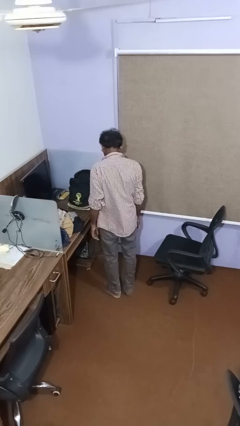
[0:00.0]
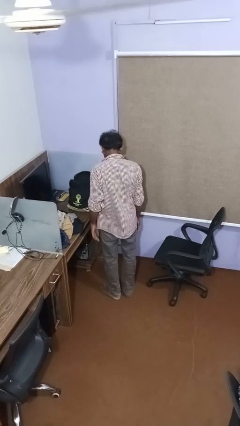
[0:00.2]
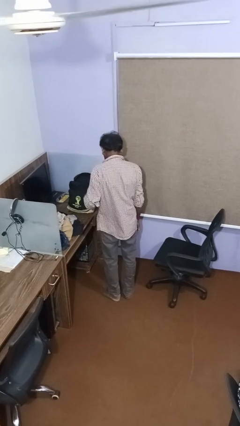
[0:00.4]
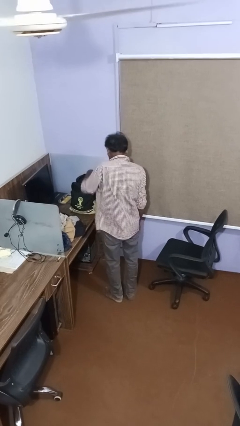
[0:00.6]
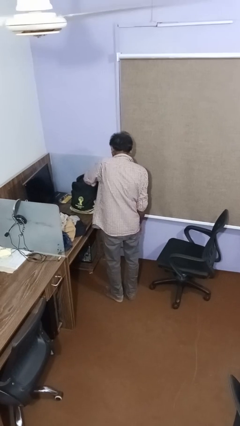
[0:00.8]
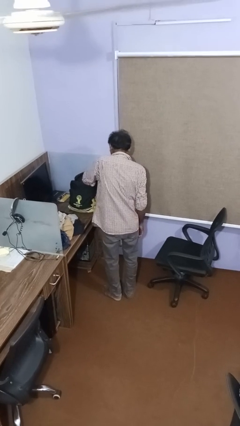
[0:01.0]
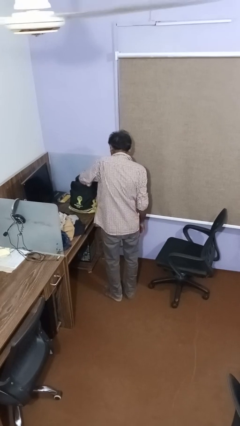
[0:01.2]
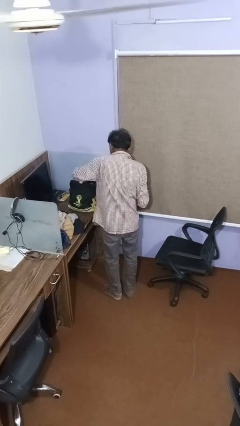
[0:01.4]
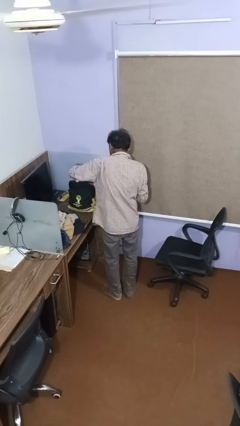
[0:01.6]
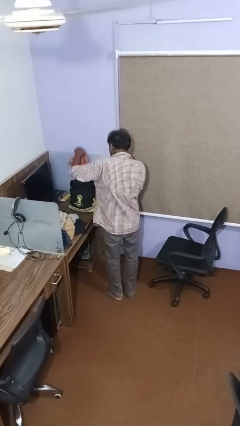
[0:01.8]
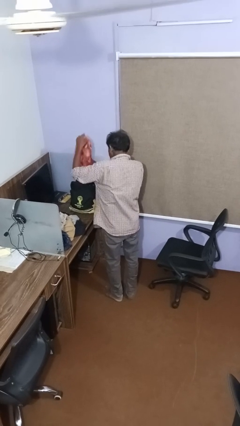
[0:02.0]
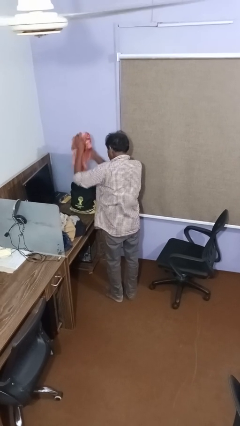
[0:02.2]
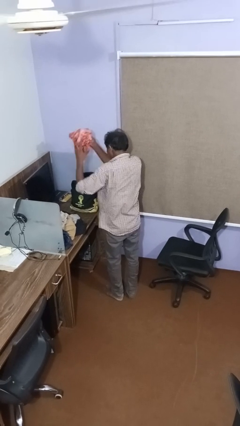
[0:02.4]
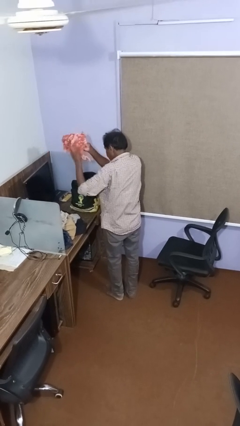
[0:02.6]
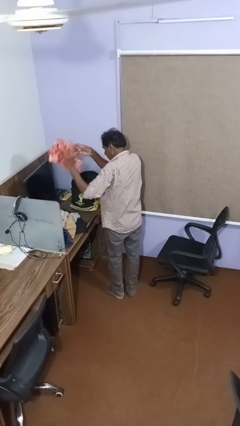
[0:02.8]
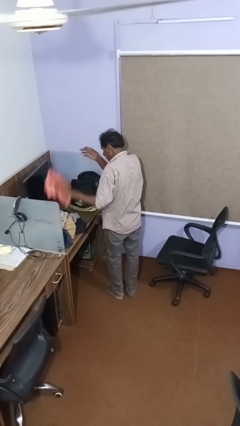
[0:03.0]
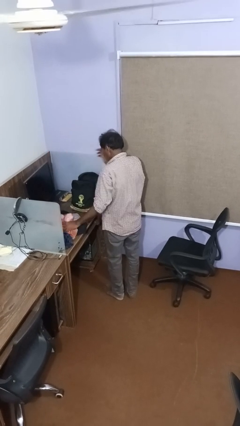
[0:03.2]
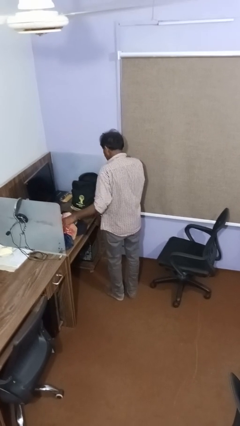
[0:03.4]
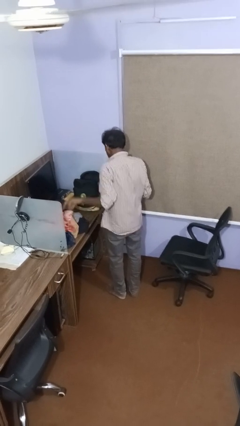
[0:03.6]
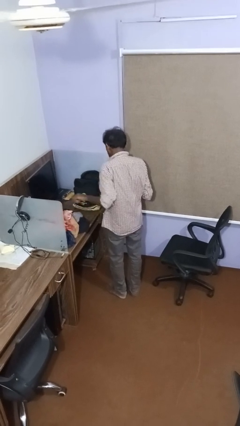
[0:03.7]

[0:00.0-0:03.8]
person unloads clothes from suitcase

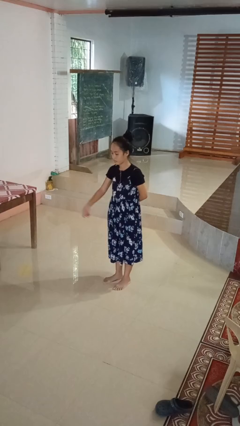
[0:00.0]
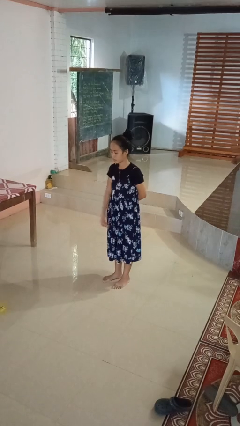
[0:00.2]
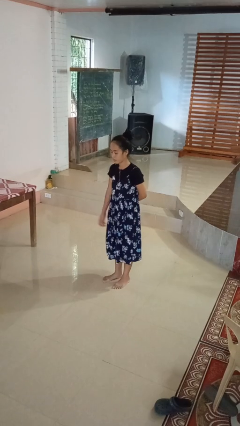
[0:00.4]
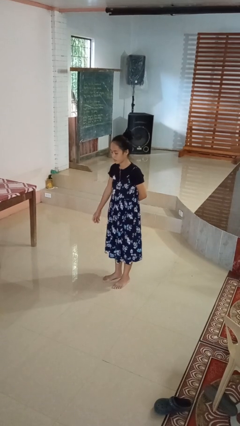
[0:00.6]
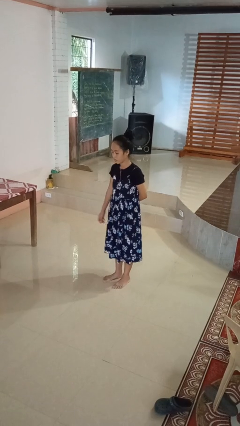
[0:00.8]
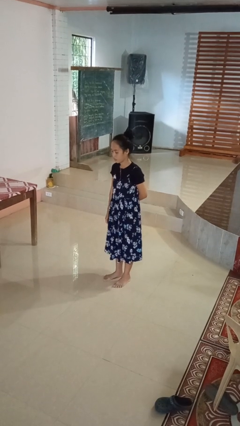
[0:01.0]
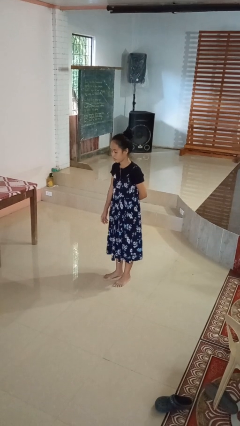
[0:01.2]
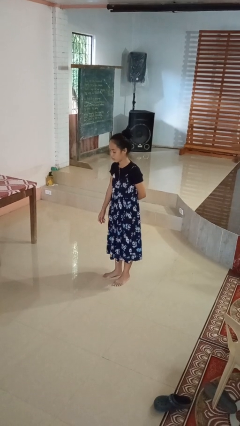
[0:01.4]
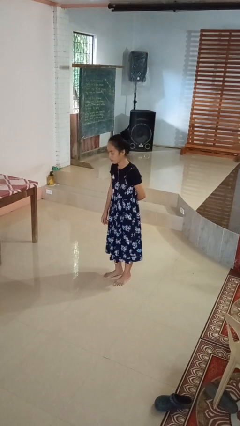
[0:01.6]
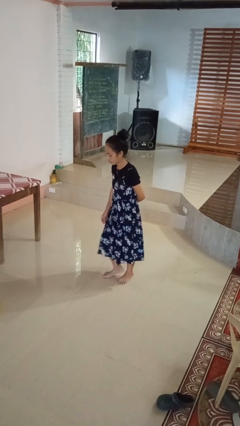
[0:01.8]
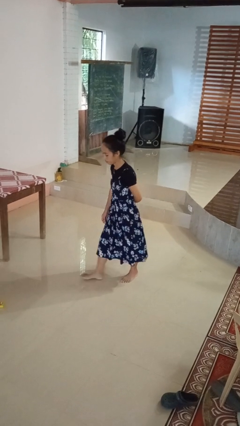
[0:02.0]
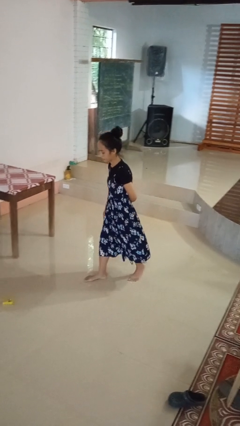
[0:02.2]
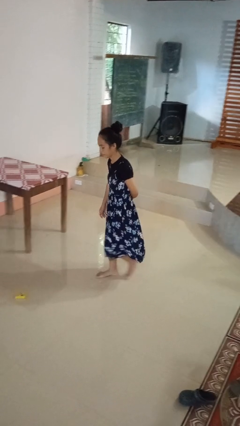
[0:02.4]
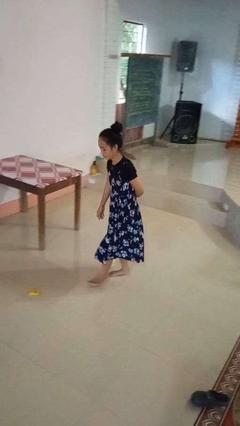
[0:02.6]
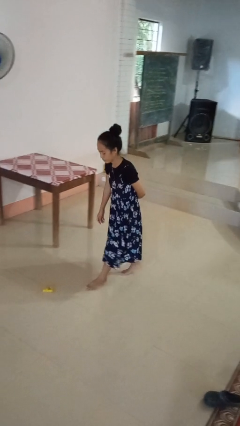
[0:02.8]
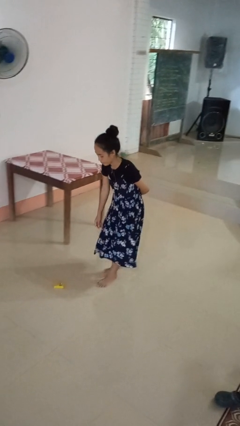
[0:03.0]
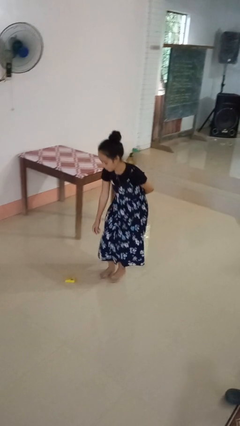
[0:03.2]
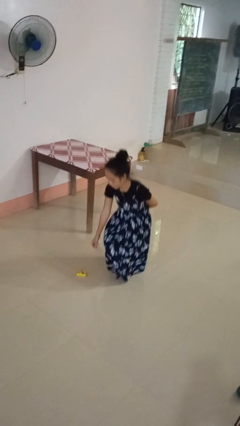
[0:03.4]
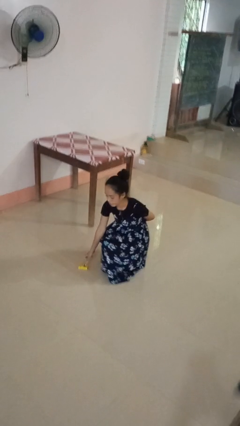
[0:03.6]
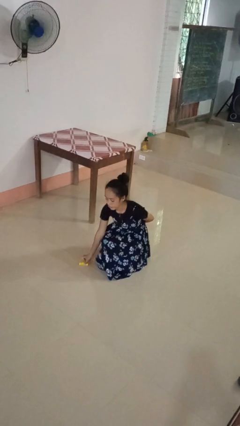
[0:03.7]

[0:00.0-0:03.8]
person throws object to ground

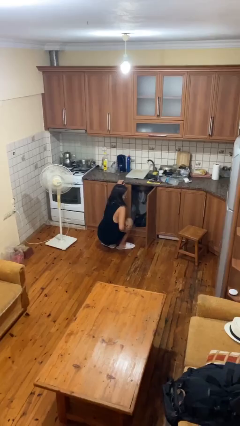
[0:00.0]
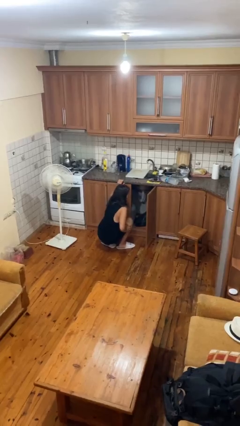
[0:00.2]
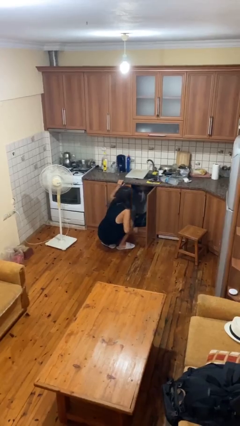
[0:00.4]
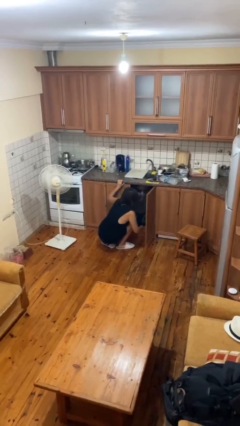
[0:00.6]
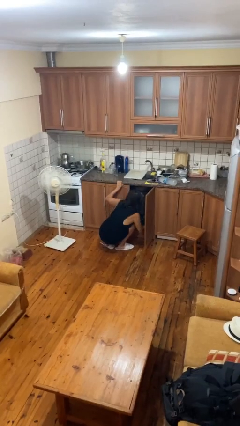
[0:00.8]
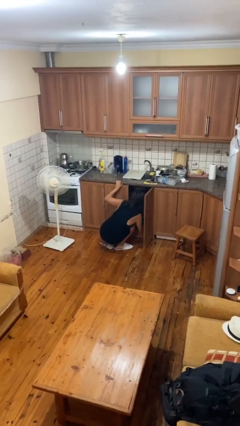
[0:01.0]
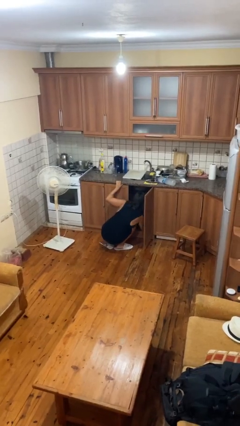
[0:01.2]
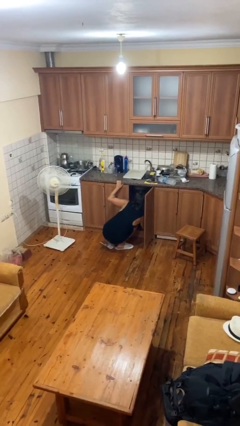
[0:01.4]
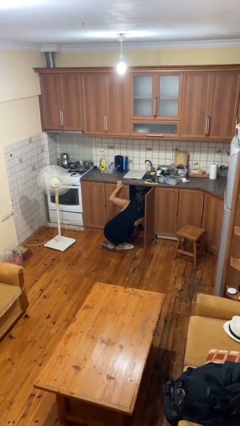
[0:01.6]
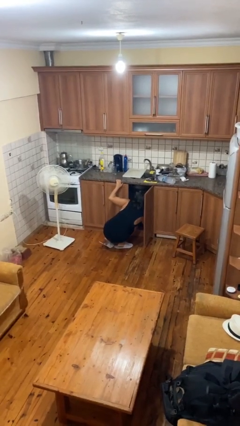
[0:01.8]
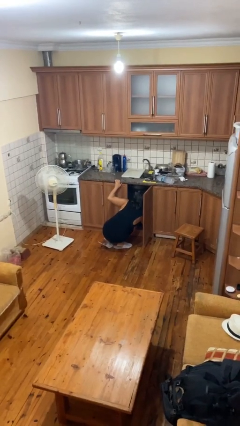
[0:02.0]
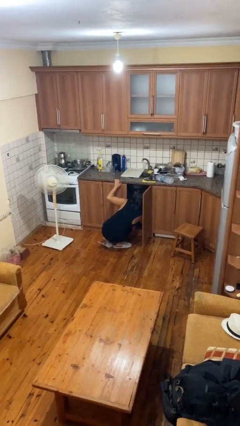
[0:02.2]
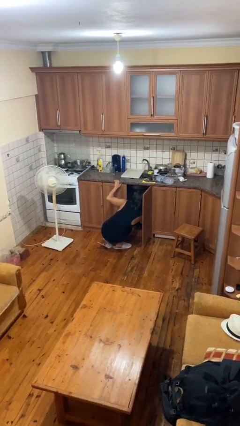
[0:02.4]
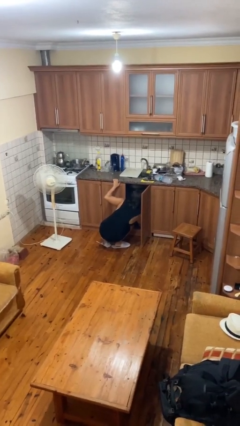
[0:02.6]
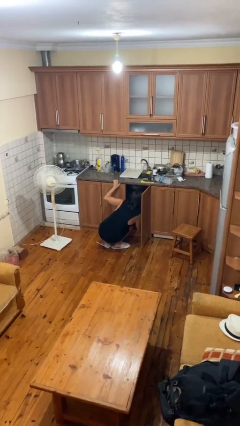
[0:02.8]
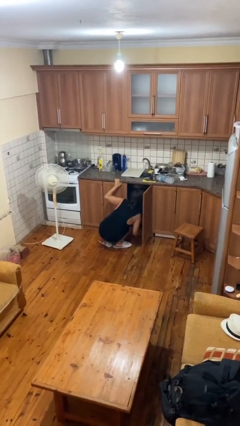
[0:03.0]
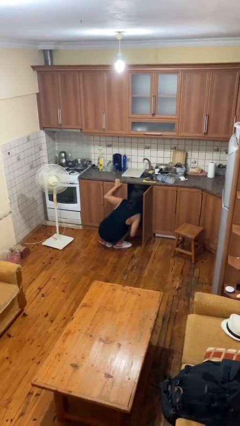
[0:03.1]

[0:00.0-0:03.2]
person searches in cabinet

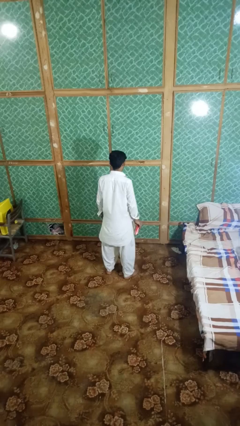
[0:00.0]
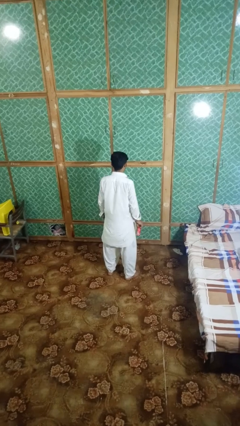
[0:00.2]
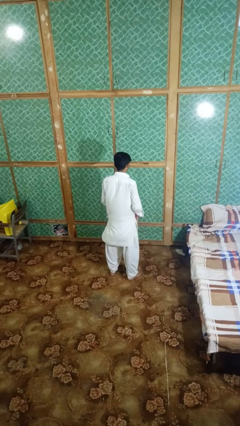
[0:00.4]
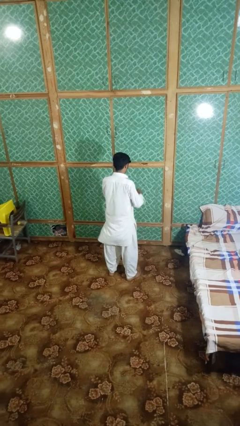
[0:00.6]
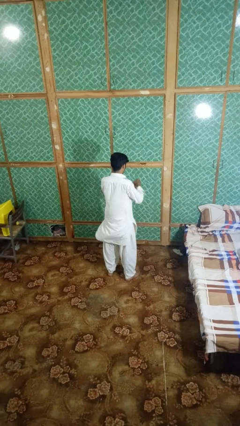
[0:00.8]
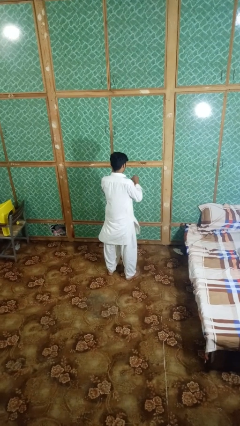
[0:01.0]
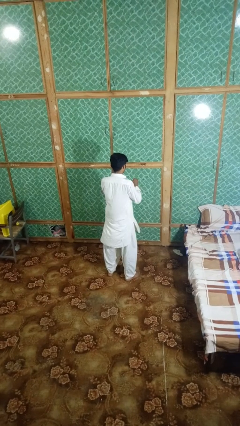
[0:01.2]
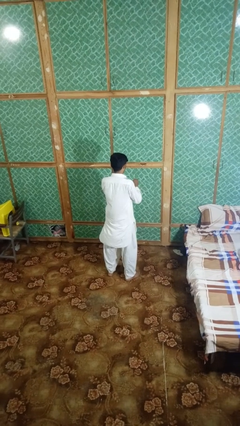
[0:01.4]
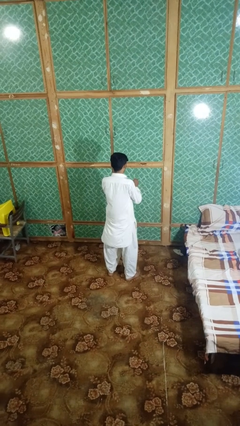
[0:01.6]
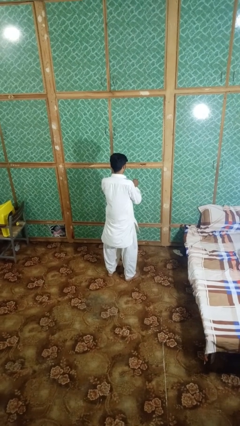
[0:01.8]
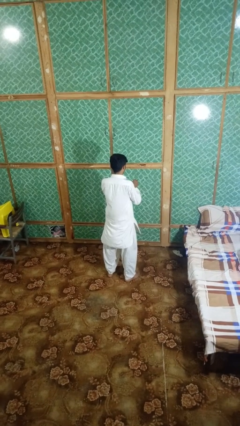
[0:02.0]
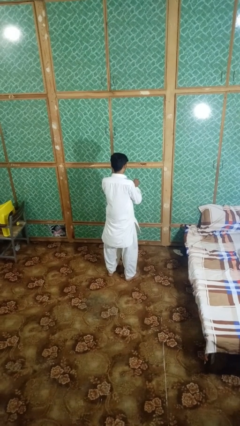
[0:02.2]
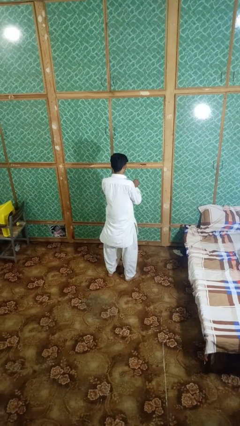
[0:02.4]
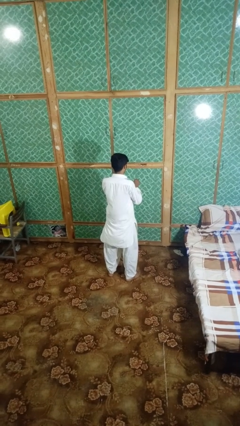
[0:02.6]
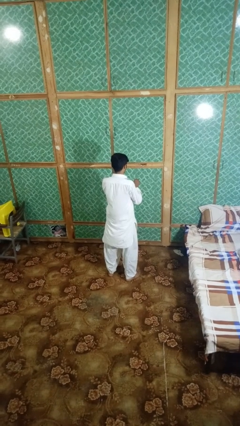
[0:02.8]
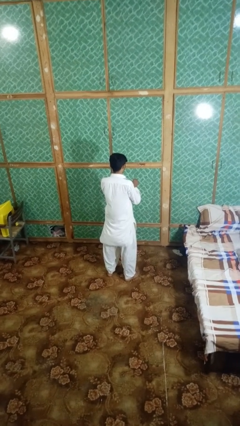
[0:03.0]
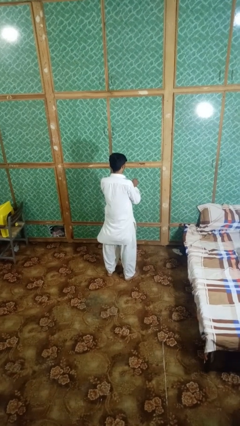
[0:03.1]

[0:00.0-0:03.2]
person opens beverage can

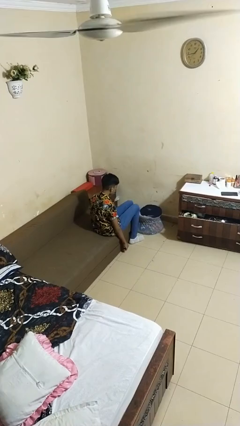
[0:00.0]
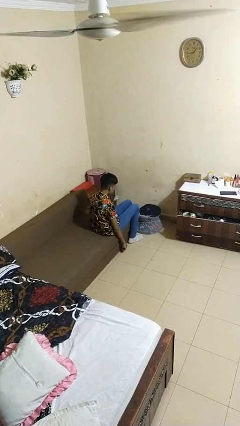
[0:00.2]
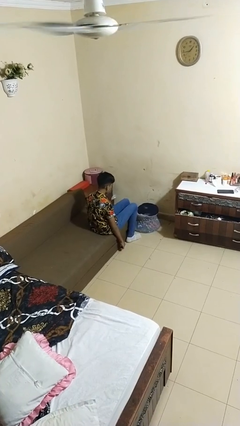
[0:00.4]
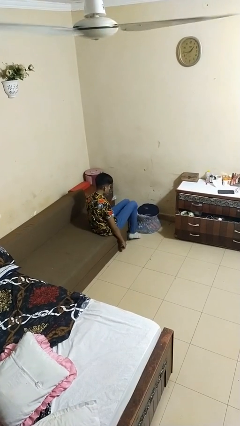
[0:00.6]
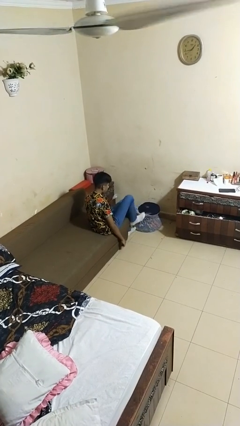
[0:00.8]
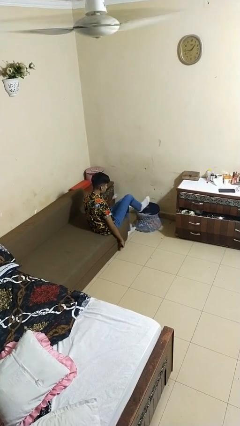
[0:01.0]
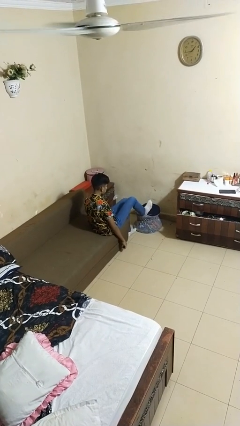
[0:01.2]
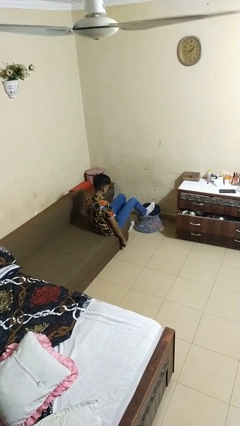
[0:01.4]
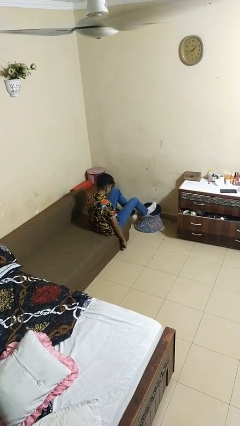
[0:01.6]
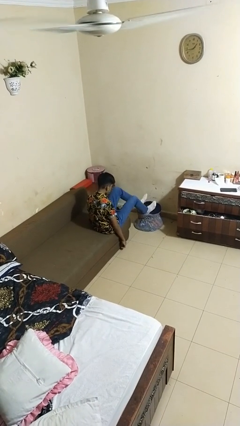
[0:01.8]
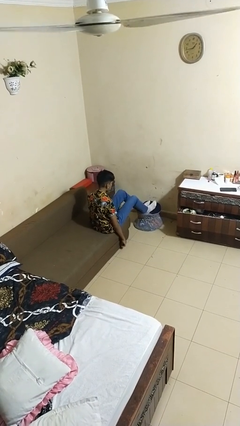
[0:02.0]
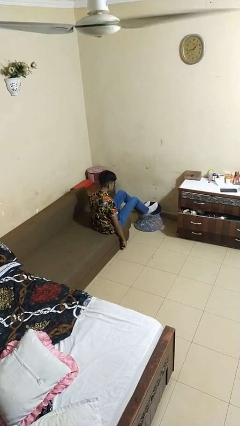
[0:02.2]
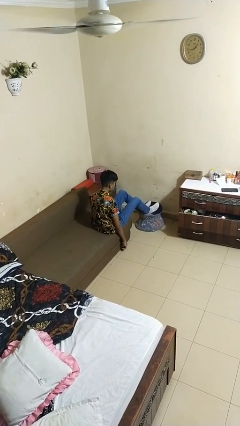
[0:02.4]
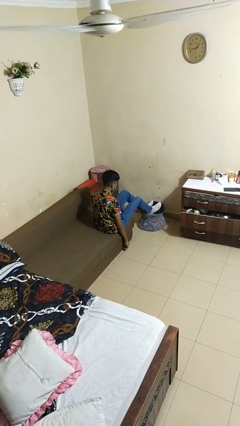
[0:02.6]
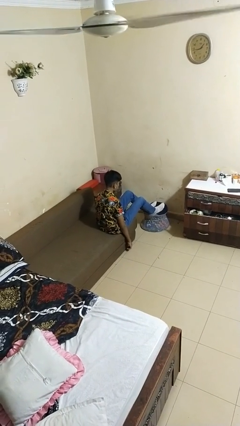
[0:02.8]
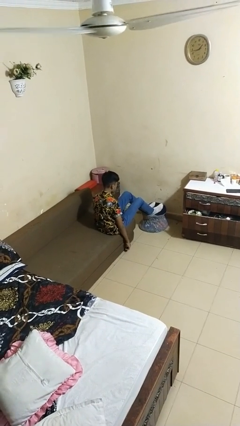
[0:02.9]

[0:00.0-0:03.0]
person puts feet up
